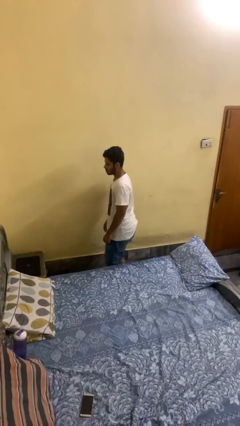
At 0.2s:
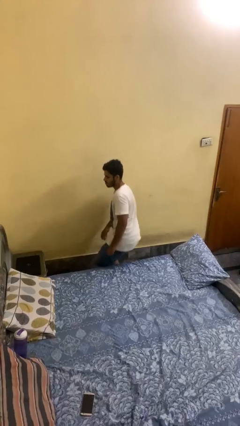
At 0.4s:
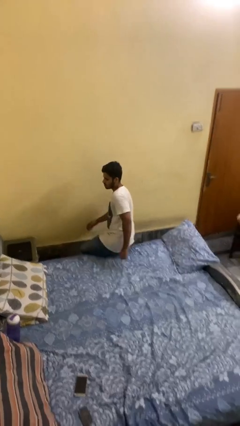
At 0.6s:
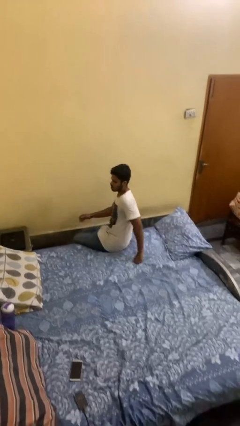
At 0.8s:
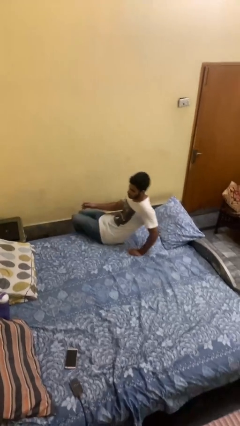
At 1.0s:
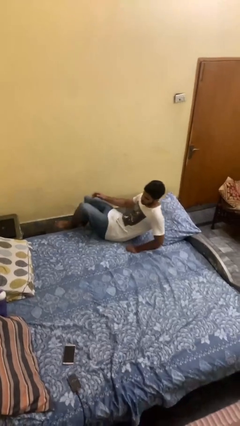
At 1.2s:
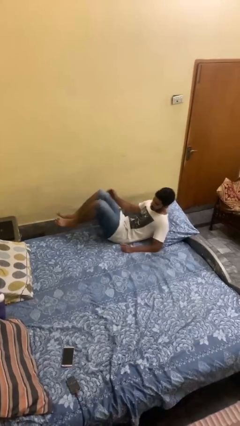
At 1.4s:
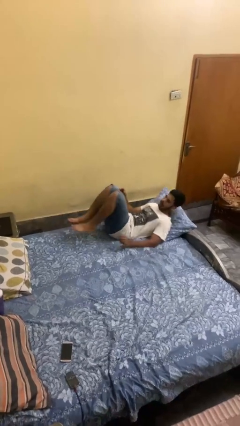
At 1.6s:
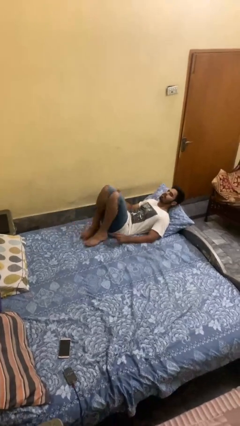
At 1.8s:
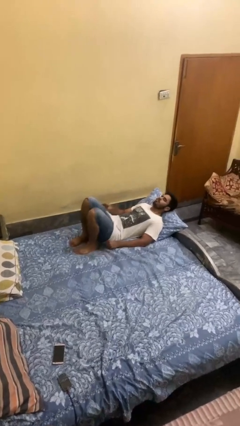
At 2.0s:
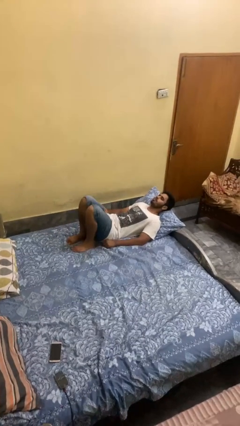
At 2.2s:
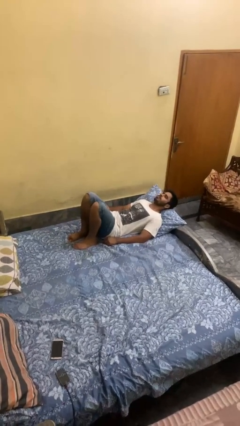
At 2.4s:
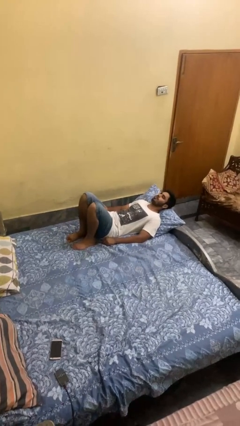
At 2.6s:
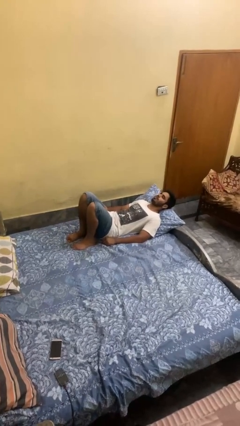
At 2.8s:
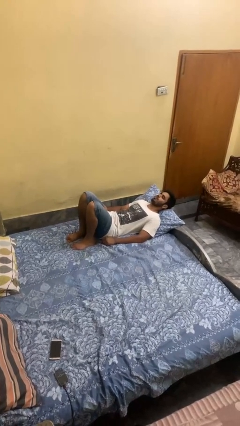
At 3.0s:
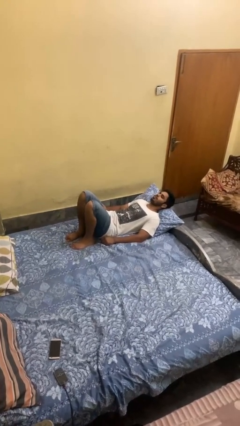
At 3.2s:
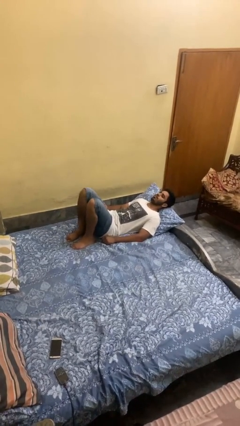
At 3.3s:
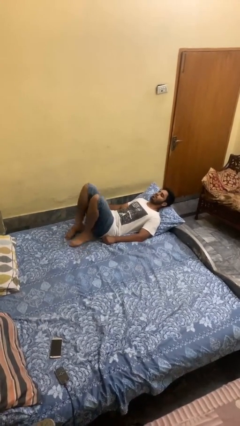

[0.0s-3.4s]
person lies down on bed

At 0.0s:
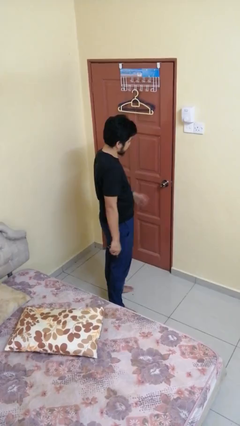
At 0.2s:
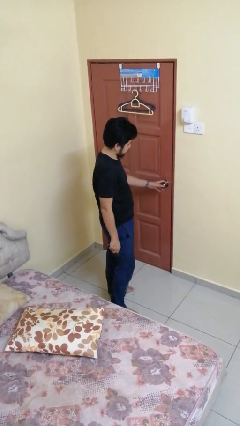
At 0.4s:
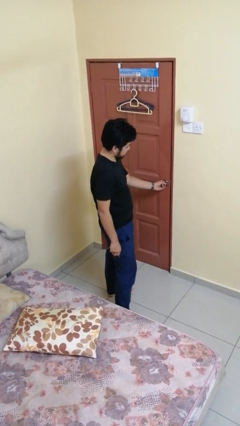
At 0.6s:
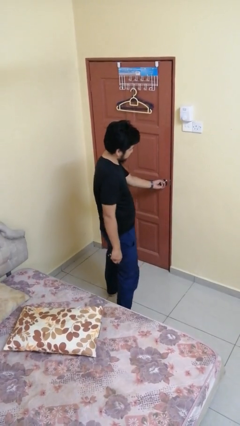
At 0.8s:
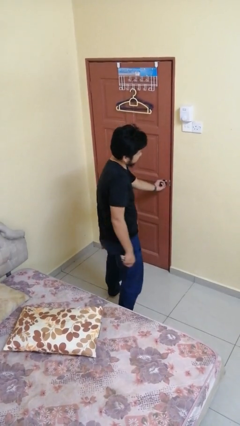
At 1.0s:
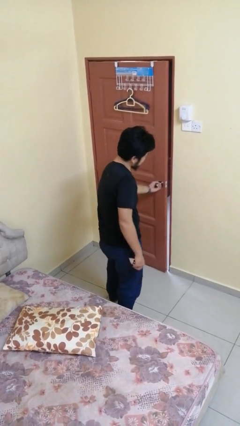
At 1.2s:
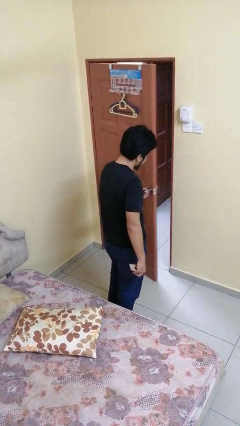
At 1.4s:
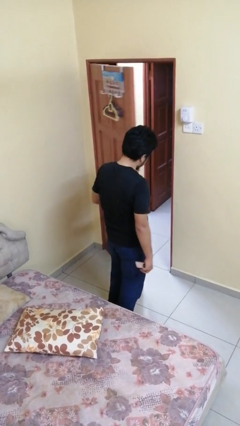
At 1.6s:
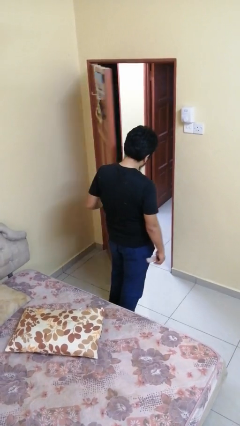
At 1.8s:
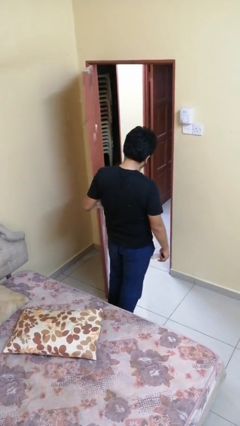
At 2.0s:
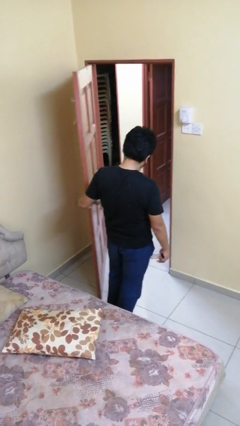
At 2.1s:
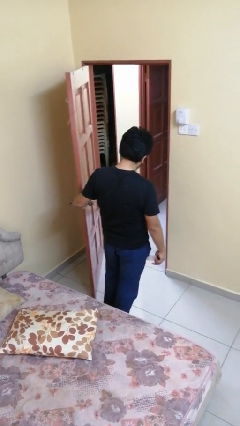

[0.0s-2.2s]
person opens facility door

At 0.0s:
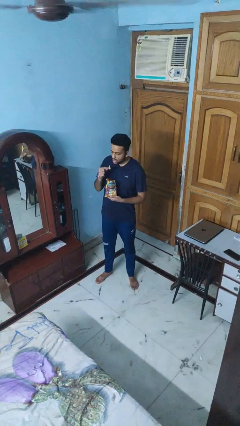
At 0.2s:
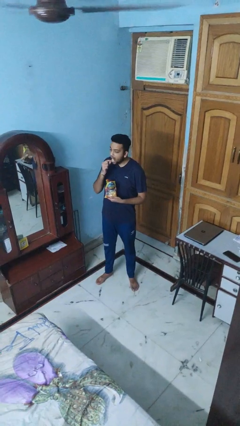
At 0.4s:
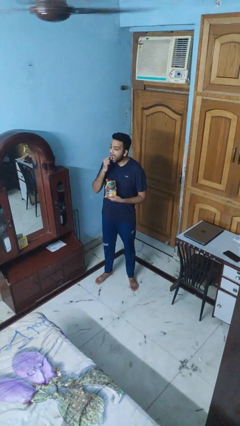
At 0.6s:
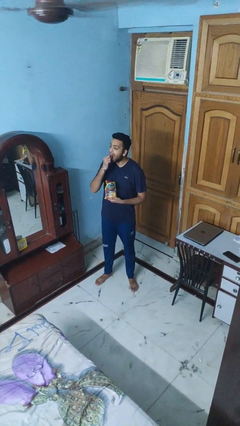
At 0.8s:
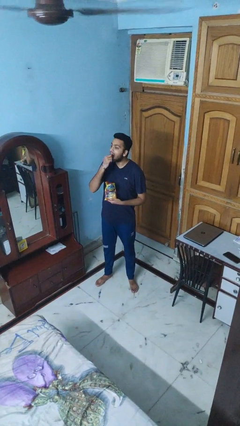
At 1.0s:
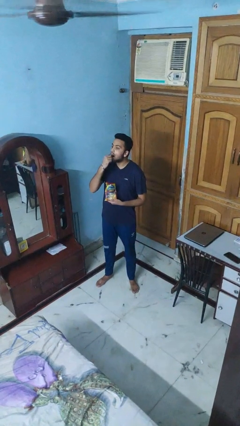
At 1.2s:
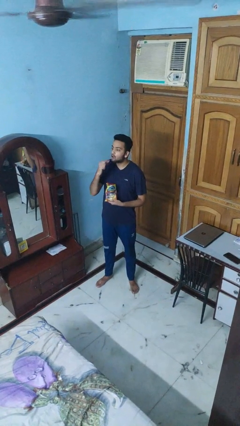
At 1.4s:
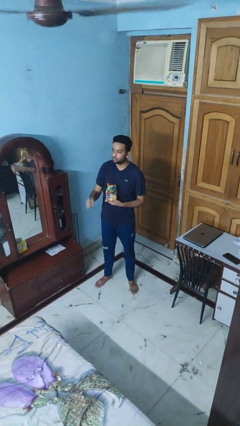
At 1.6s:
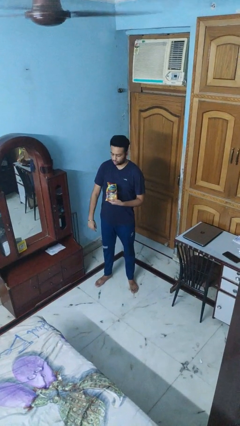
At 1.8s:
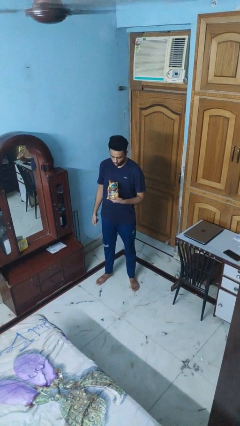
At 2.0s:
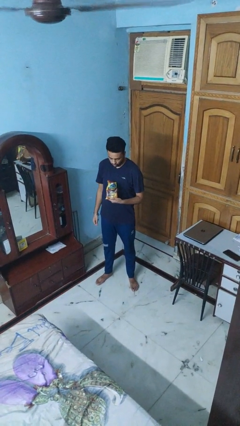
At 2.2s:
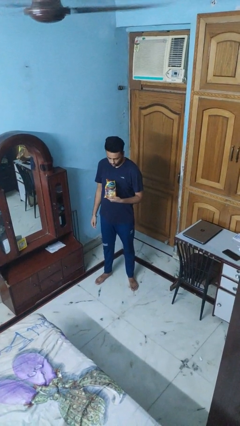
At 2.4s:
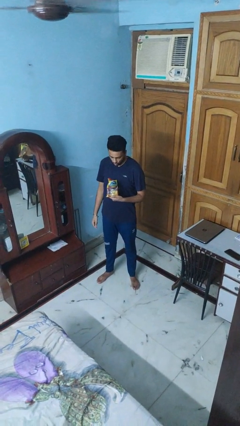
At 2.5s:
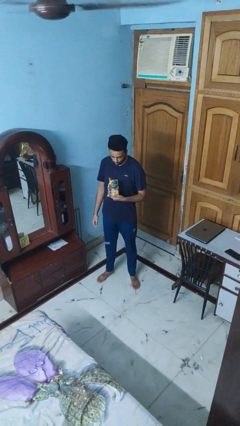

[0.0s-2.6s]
person eats snack from bag

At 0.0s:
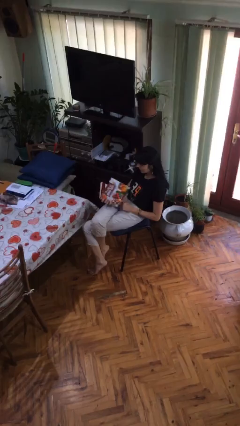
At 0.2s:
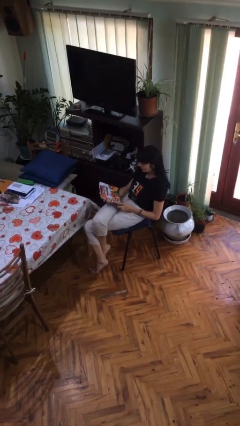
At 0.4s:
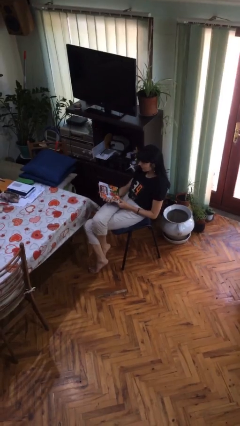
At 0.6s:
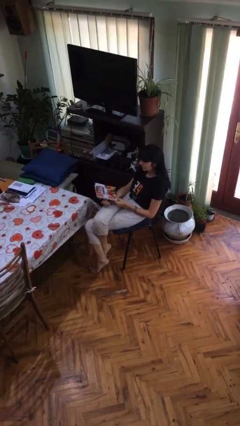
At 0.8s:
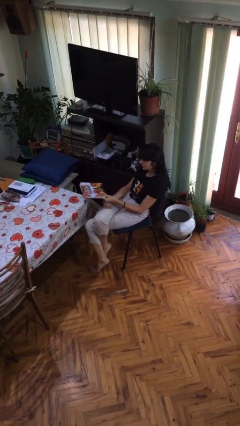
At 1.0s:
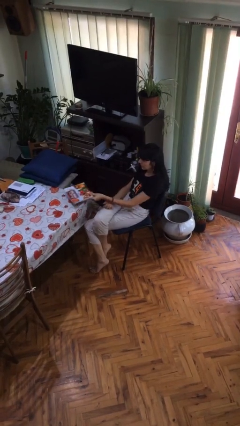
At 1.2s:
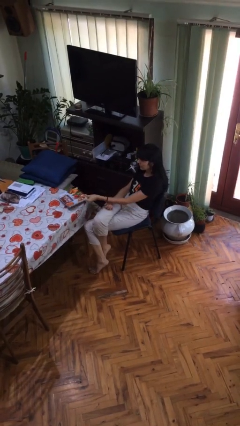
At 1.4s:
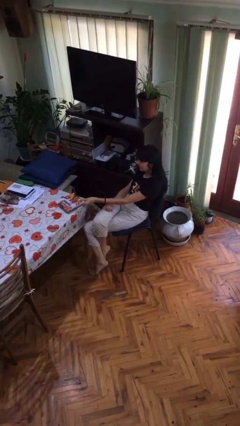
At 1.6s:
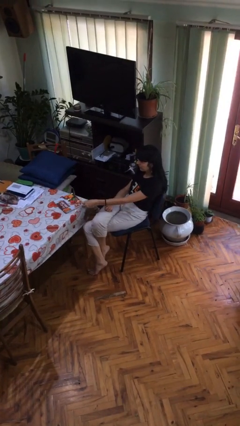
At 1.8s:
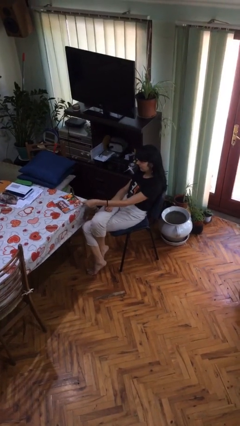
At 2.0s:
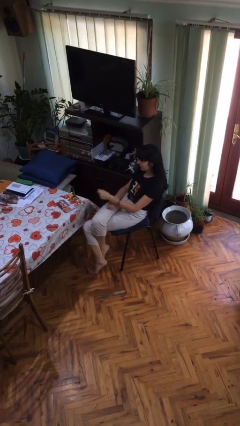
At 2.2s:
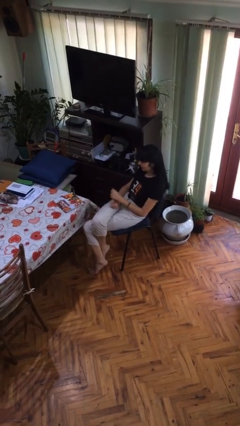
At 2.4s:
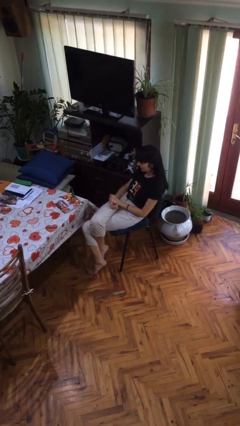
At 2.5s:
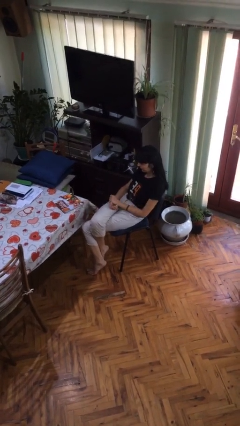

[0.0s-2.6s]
person puts down object on table

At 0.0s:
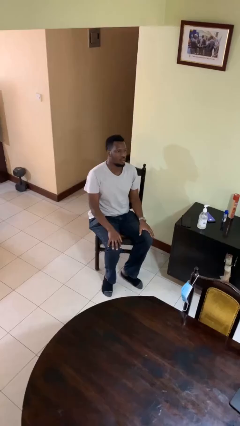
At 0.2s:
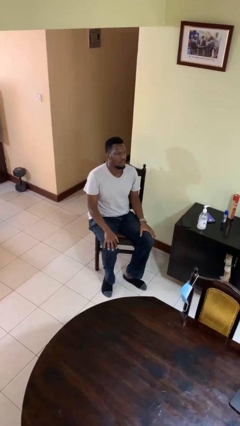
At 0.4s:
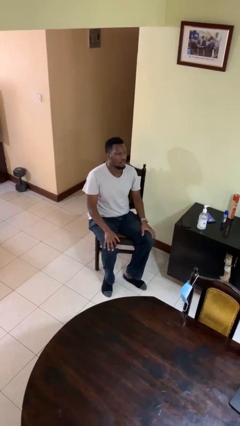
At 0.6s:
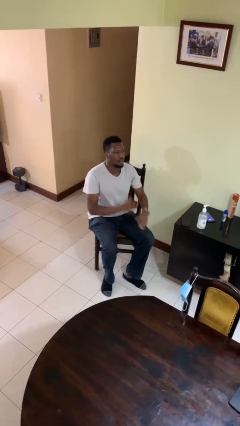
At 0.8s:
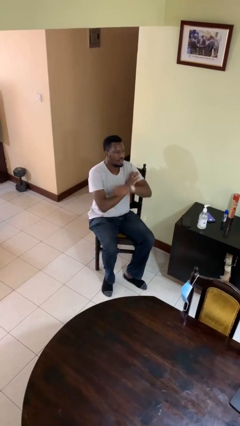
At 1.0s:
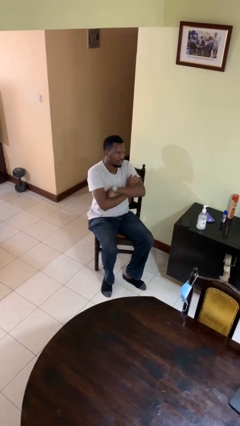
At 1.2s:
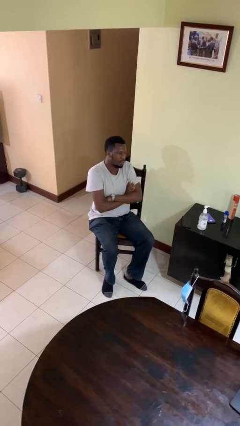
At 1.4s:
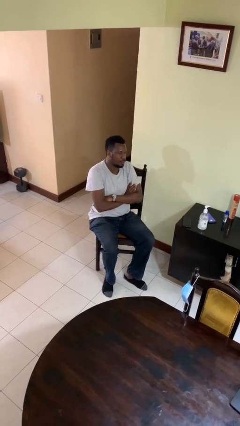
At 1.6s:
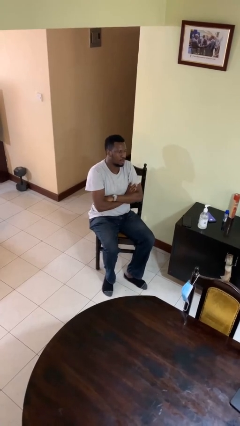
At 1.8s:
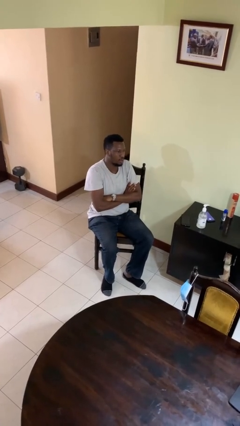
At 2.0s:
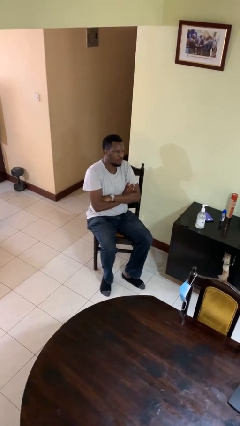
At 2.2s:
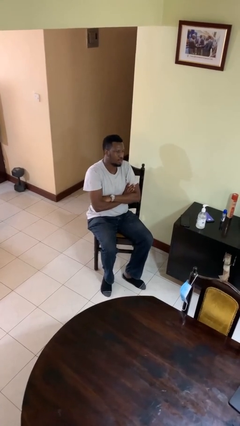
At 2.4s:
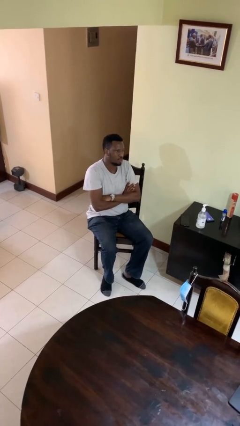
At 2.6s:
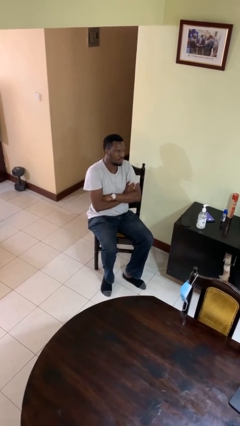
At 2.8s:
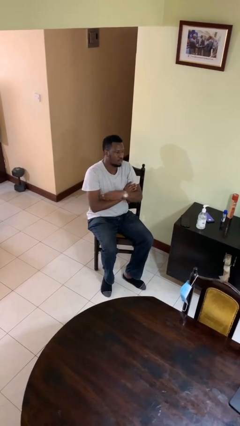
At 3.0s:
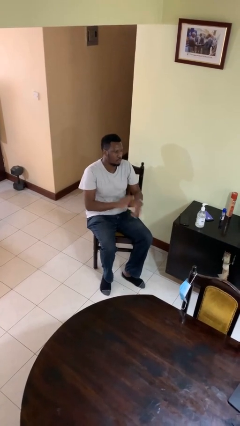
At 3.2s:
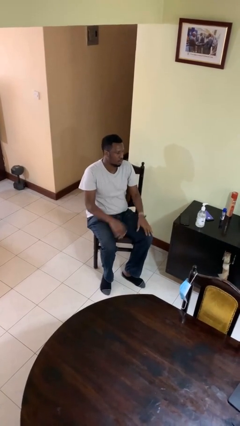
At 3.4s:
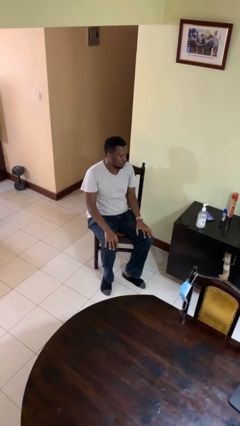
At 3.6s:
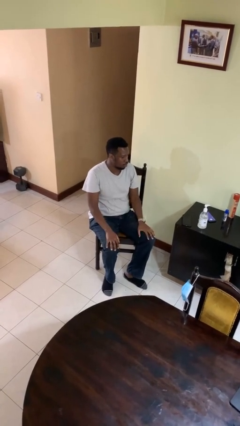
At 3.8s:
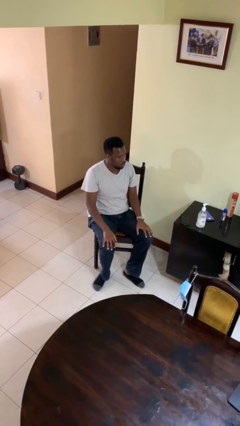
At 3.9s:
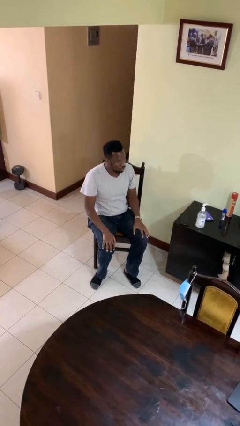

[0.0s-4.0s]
person crosses arms

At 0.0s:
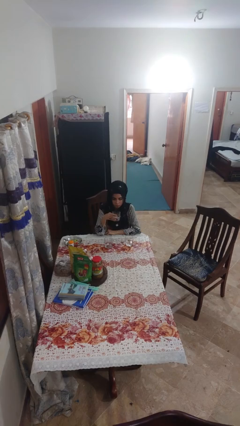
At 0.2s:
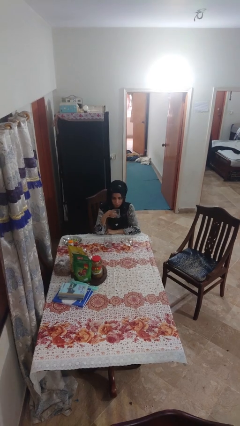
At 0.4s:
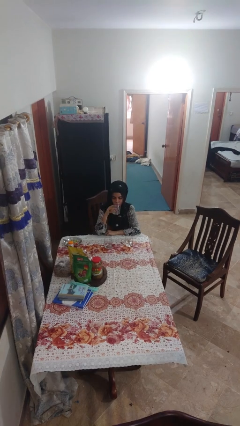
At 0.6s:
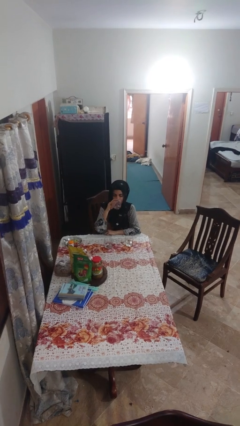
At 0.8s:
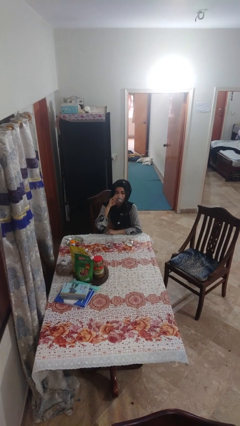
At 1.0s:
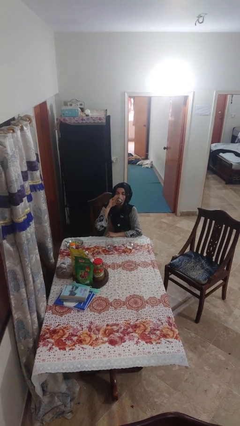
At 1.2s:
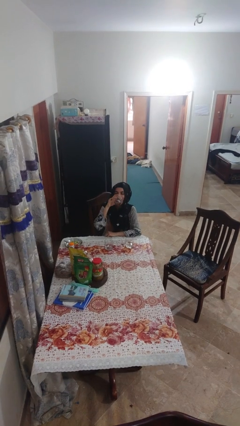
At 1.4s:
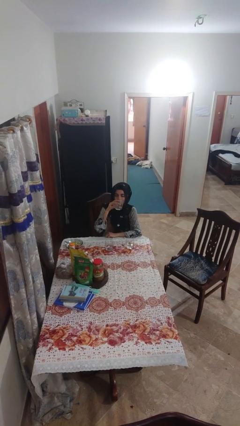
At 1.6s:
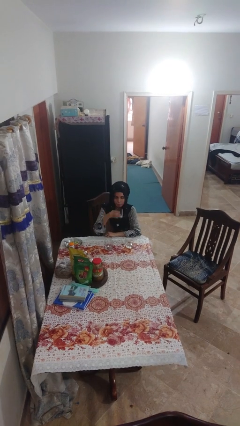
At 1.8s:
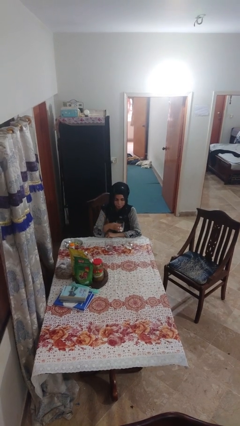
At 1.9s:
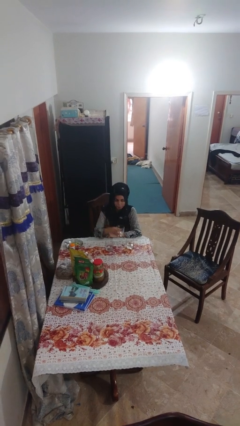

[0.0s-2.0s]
person drinks from shotglass

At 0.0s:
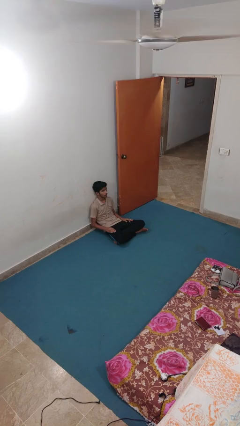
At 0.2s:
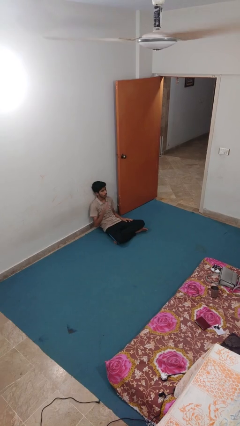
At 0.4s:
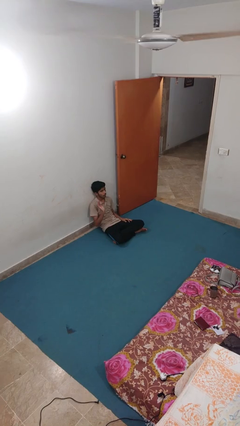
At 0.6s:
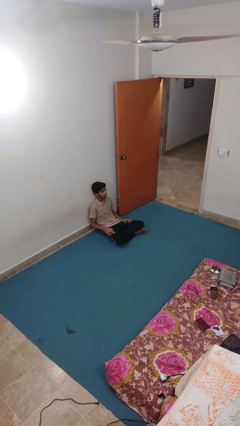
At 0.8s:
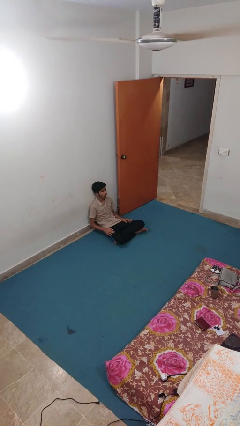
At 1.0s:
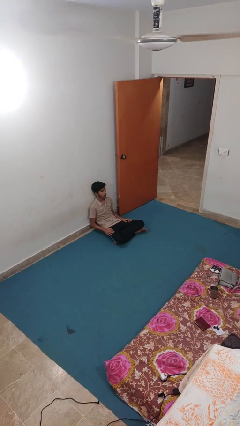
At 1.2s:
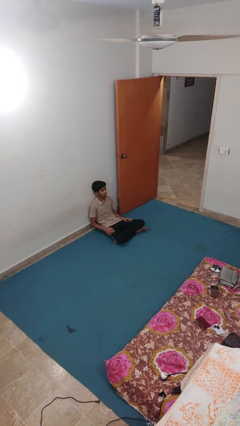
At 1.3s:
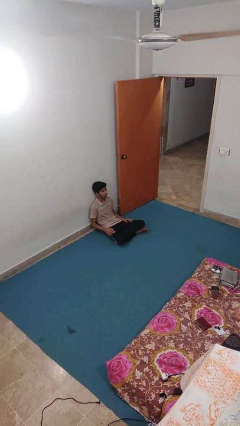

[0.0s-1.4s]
person slaps hands on thighs
